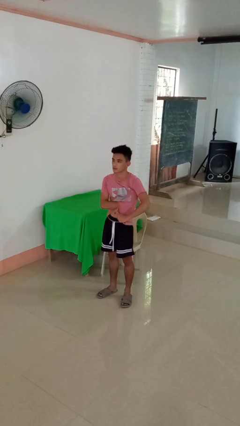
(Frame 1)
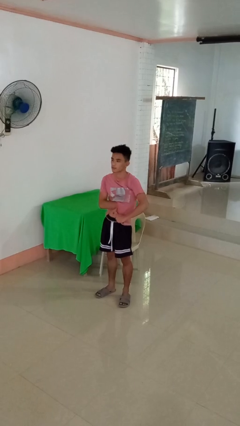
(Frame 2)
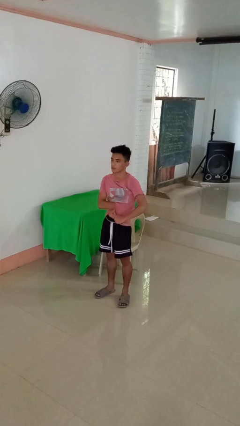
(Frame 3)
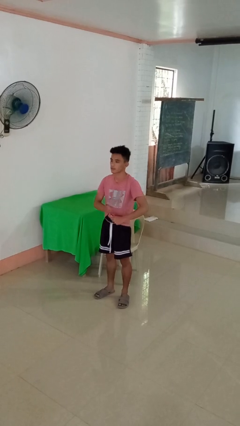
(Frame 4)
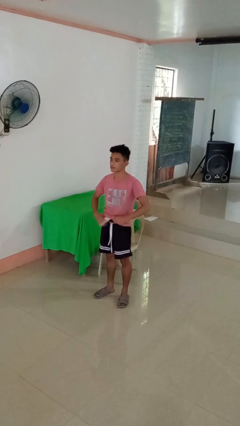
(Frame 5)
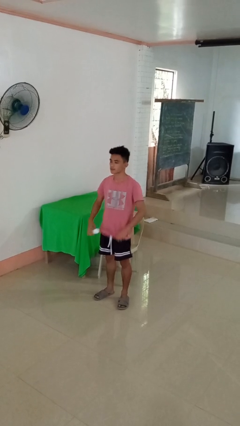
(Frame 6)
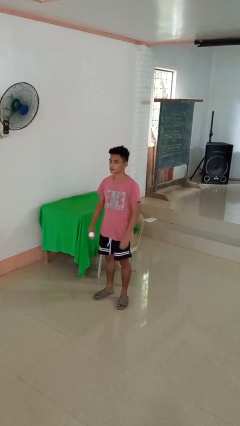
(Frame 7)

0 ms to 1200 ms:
person applies deodorant

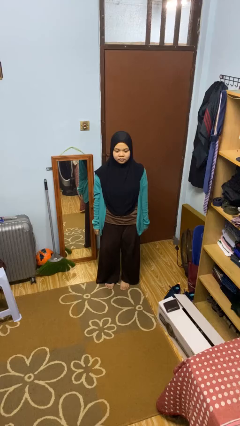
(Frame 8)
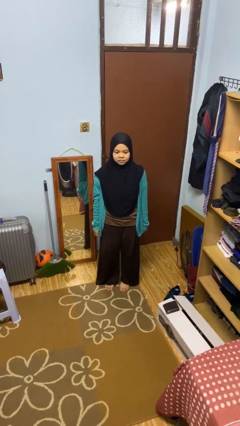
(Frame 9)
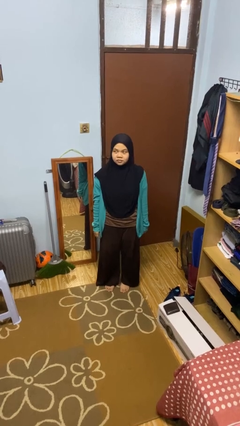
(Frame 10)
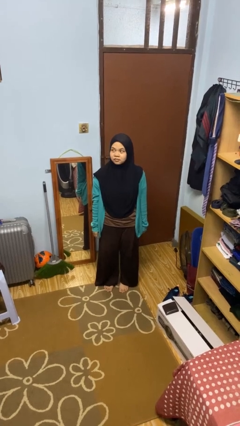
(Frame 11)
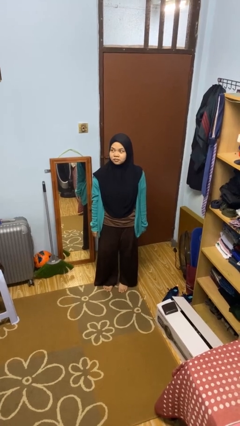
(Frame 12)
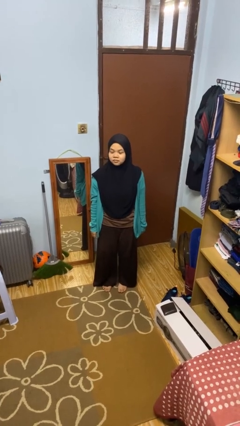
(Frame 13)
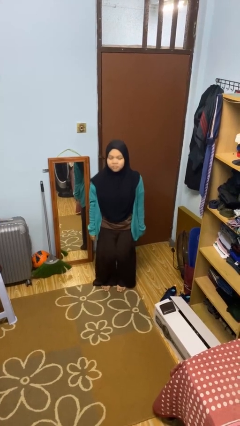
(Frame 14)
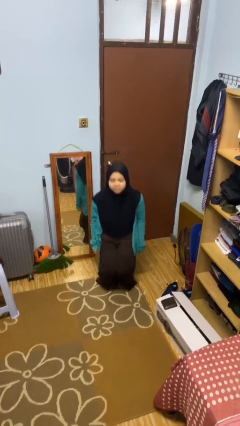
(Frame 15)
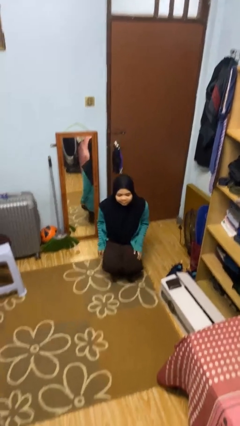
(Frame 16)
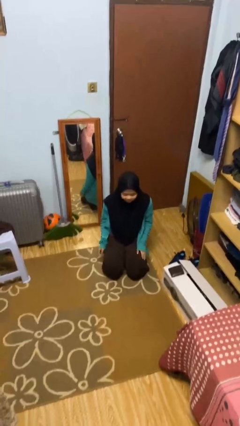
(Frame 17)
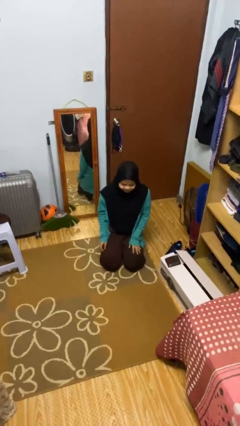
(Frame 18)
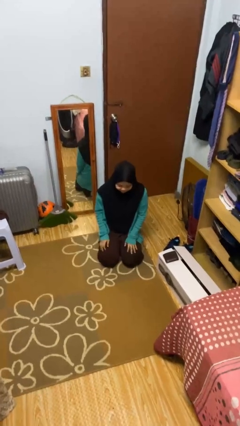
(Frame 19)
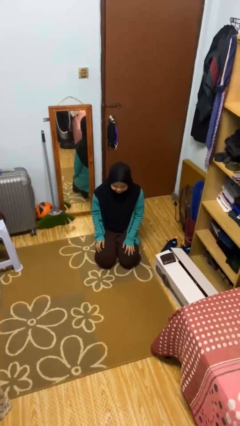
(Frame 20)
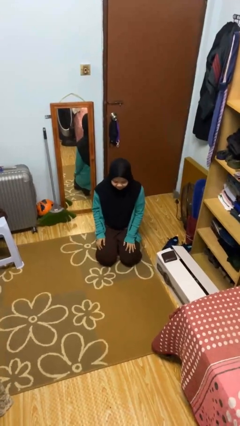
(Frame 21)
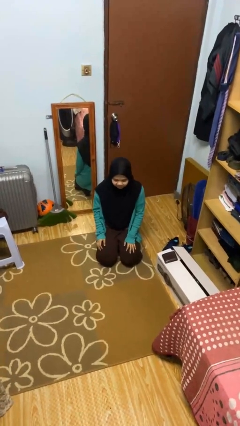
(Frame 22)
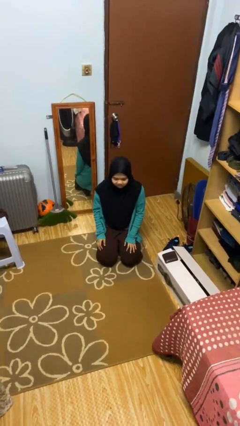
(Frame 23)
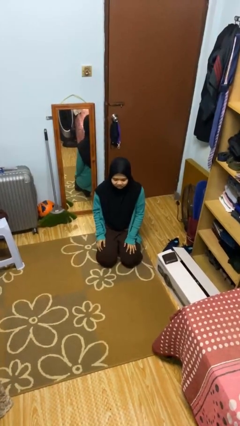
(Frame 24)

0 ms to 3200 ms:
person kneels

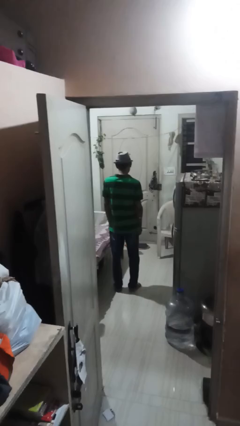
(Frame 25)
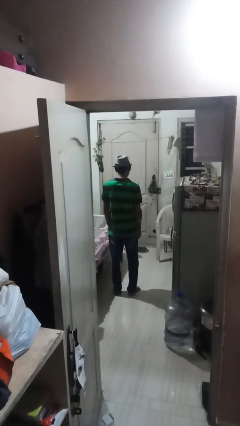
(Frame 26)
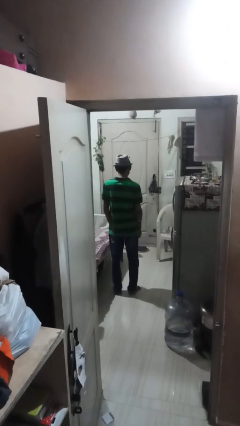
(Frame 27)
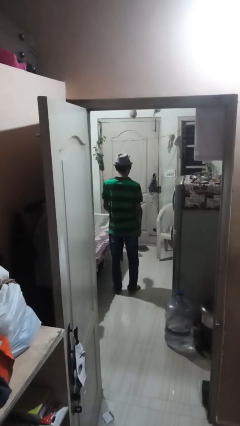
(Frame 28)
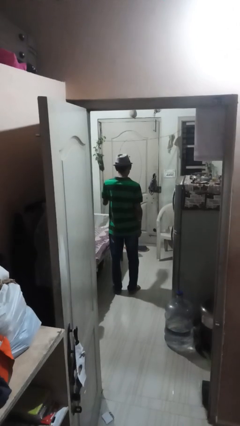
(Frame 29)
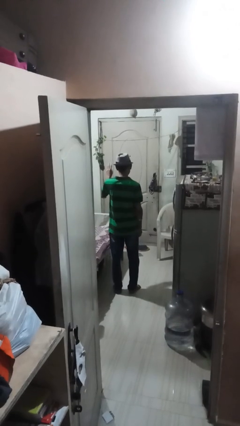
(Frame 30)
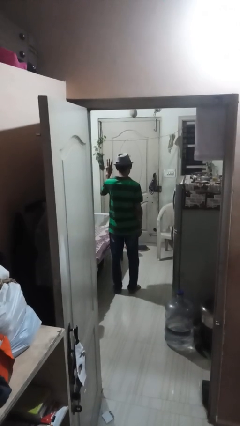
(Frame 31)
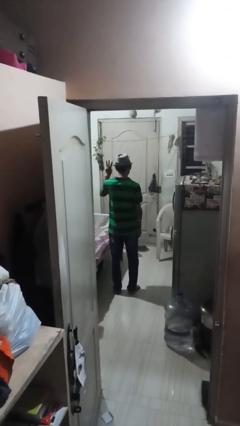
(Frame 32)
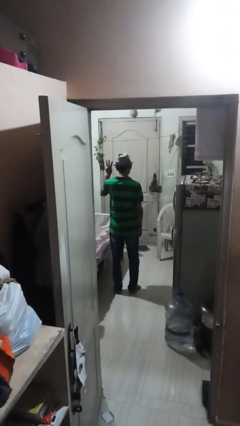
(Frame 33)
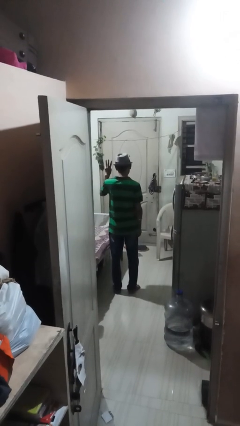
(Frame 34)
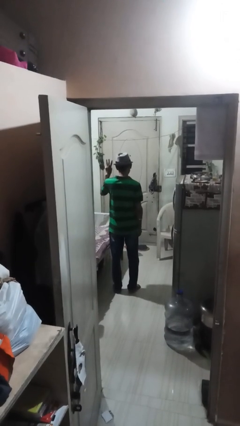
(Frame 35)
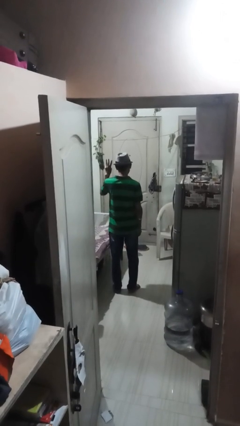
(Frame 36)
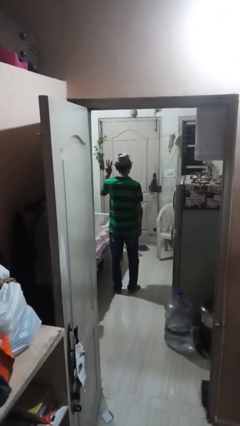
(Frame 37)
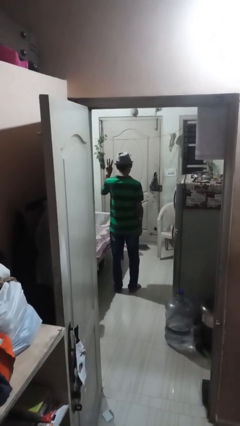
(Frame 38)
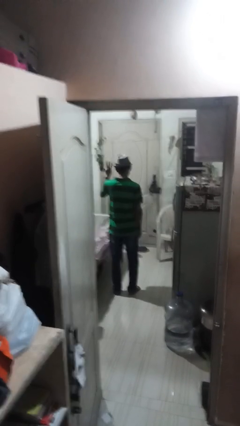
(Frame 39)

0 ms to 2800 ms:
person gestures number three

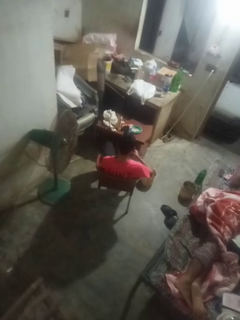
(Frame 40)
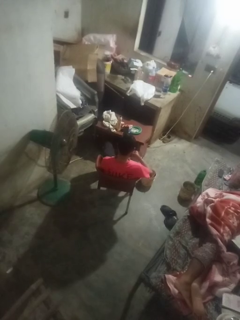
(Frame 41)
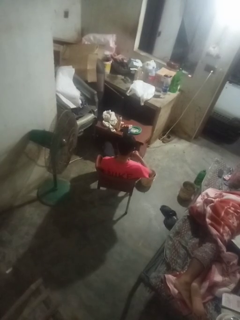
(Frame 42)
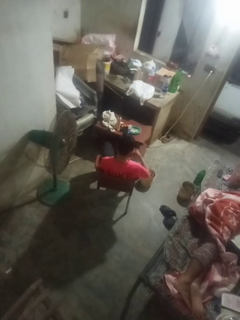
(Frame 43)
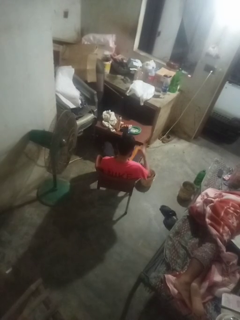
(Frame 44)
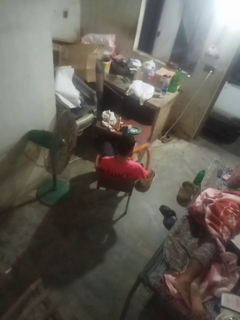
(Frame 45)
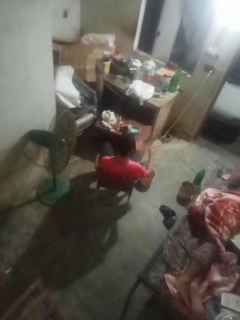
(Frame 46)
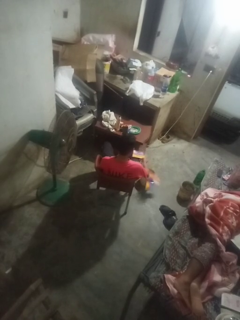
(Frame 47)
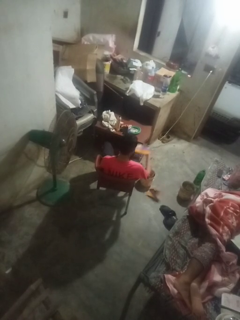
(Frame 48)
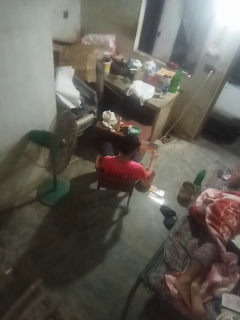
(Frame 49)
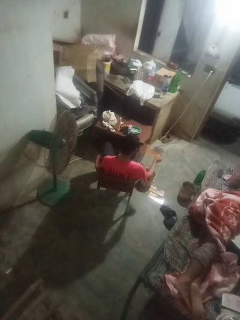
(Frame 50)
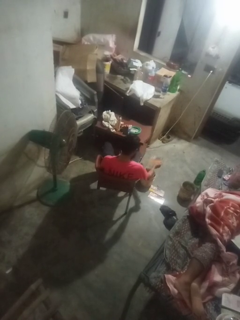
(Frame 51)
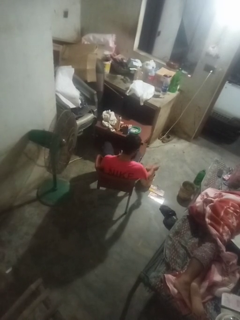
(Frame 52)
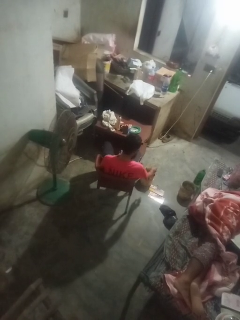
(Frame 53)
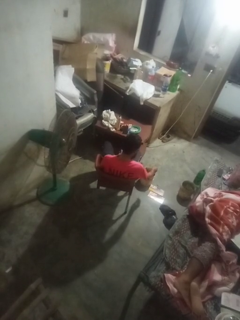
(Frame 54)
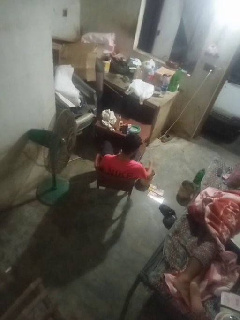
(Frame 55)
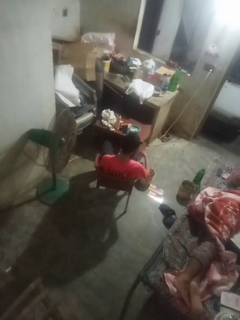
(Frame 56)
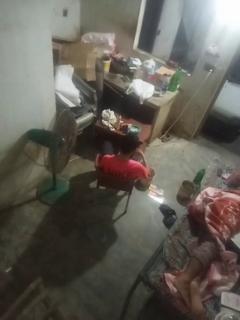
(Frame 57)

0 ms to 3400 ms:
person discards trash

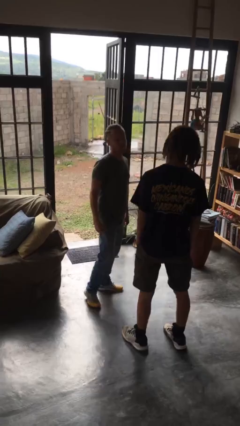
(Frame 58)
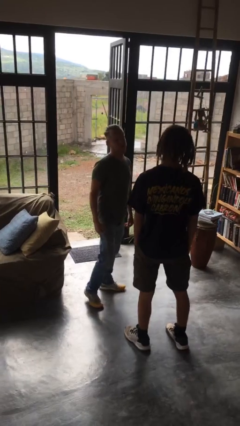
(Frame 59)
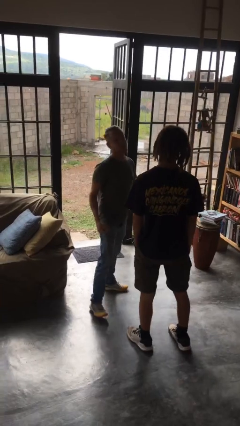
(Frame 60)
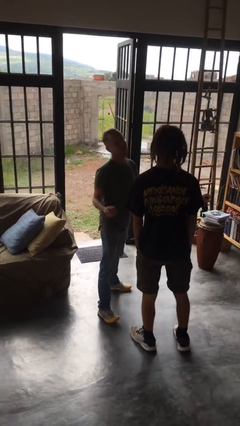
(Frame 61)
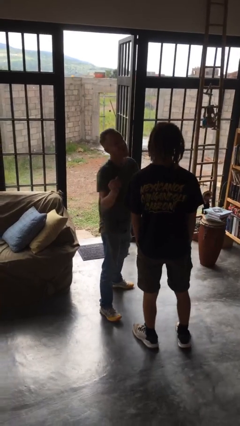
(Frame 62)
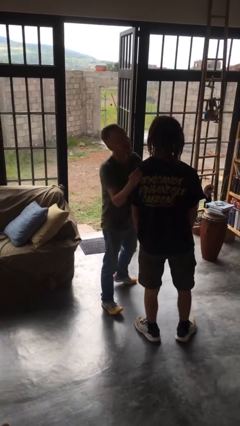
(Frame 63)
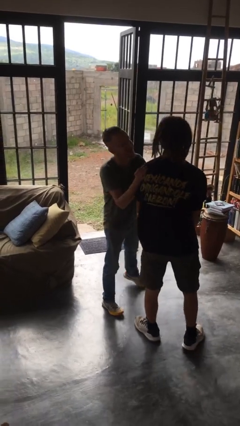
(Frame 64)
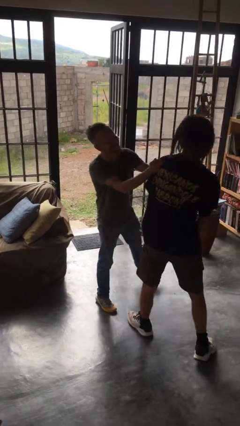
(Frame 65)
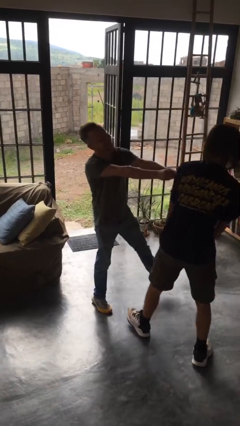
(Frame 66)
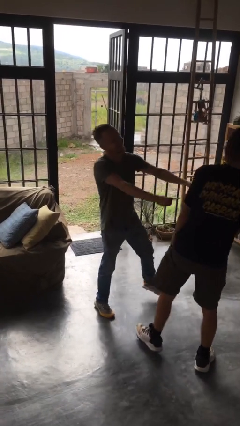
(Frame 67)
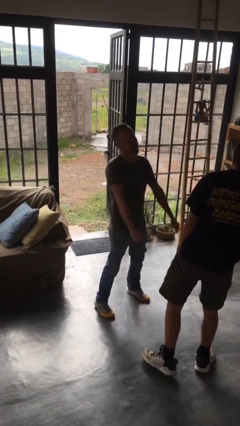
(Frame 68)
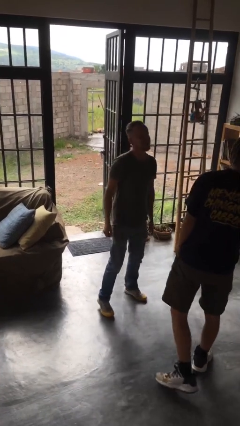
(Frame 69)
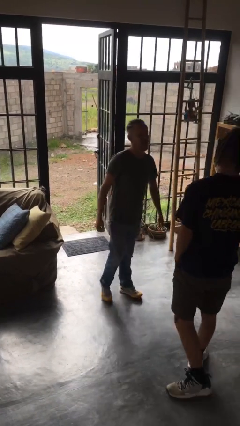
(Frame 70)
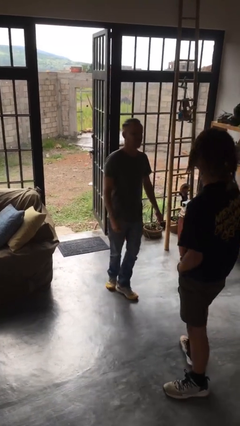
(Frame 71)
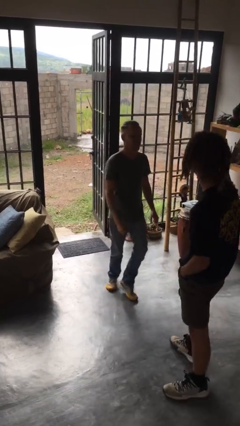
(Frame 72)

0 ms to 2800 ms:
person shoves person

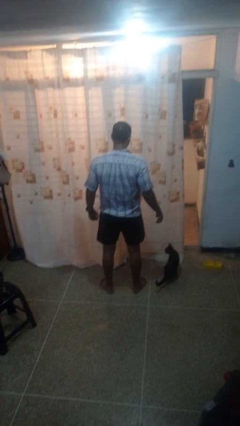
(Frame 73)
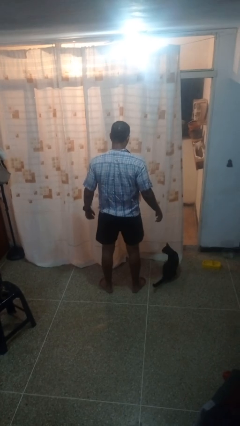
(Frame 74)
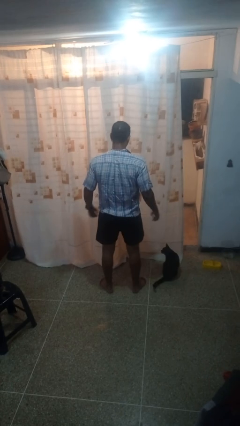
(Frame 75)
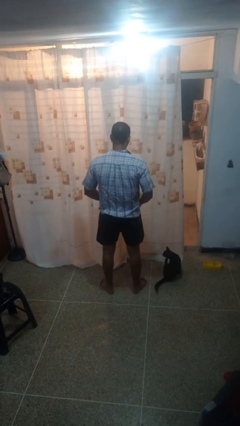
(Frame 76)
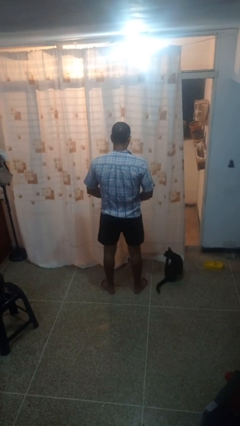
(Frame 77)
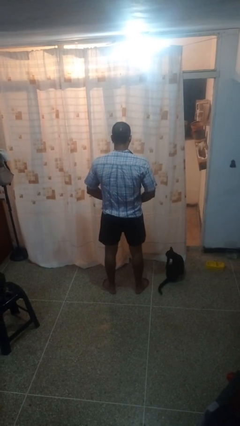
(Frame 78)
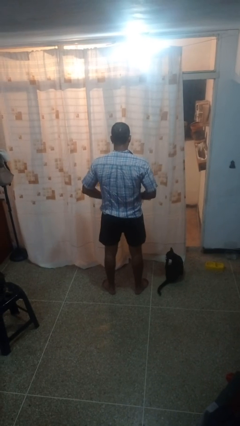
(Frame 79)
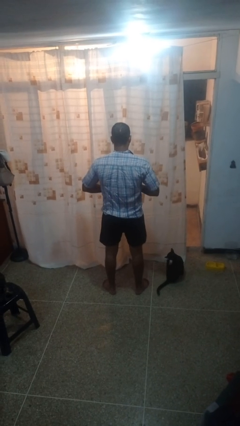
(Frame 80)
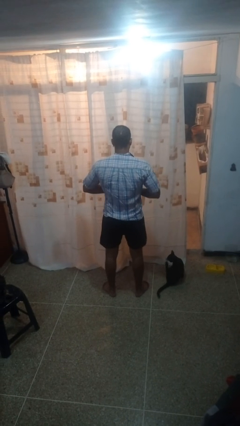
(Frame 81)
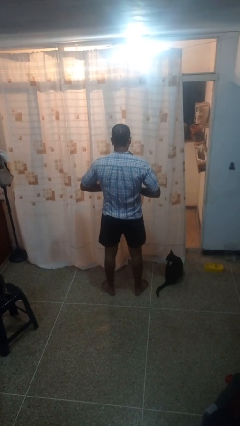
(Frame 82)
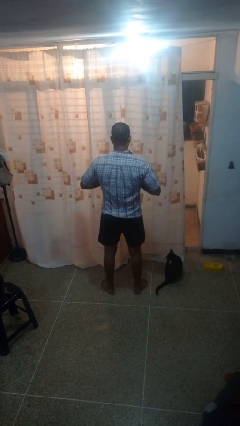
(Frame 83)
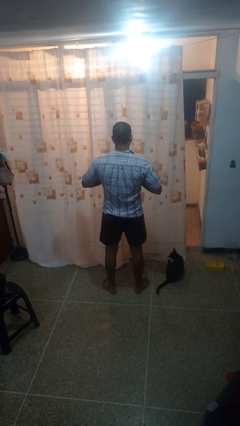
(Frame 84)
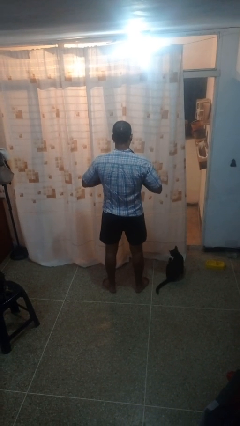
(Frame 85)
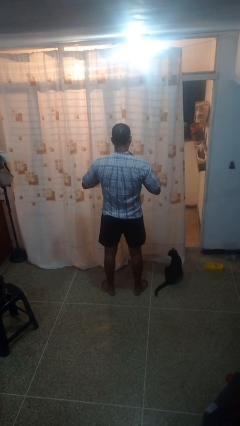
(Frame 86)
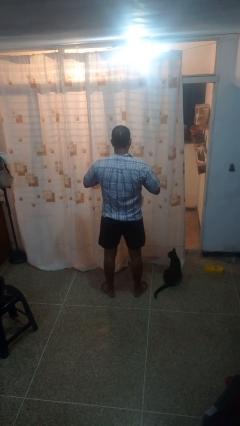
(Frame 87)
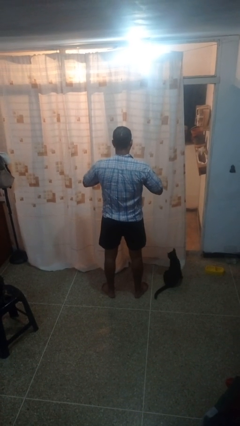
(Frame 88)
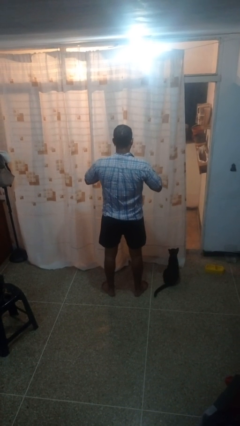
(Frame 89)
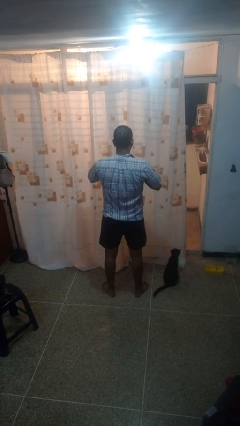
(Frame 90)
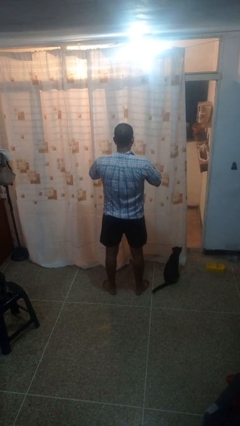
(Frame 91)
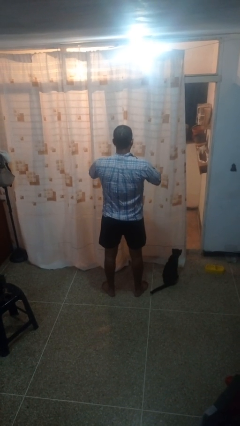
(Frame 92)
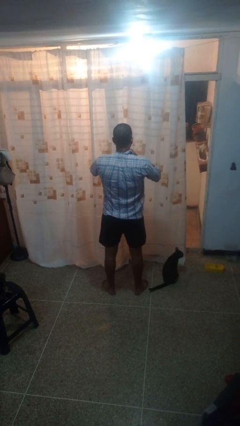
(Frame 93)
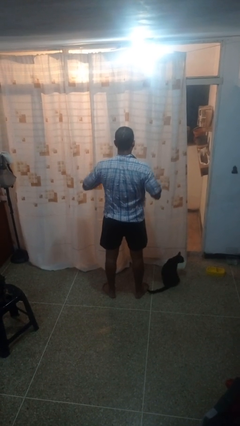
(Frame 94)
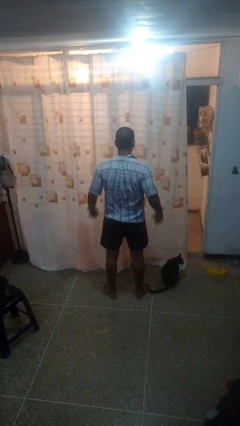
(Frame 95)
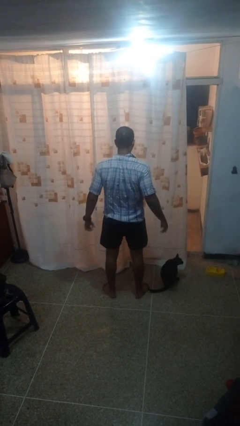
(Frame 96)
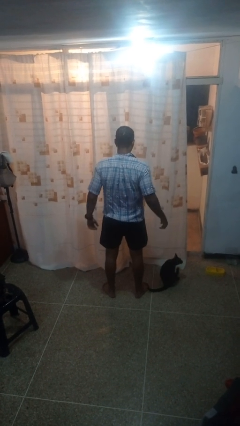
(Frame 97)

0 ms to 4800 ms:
person buttons shirt
